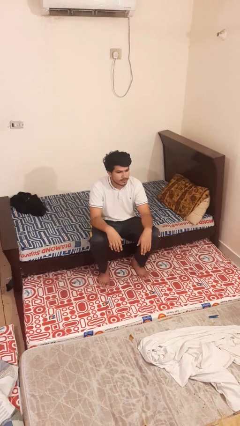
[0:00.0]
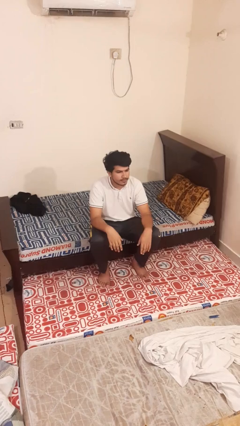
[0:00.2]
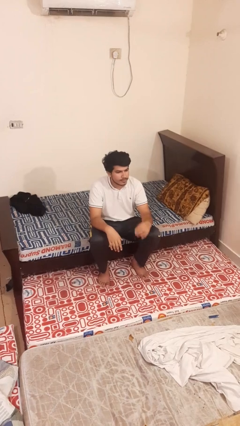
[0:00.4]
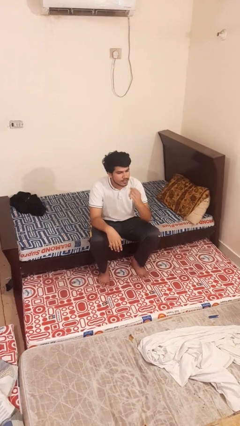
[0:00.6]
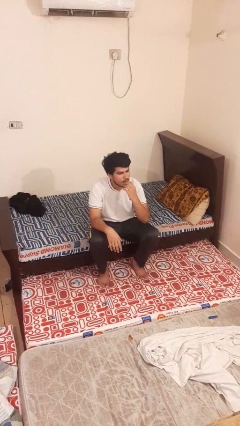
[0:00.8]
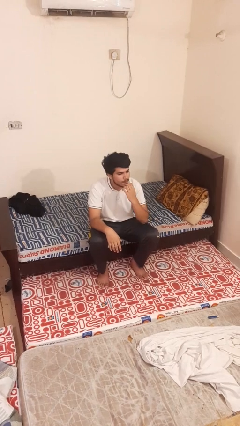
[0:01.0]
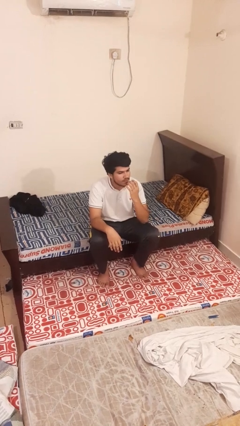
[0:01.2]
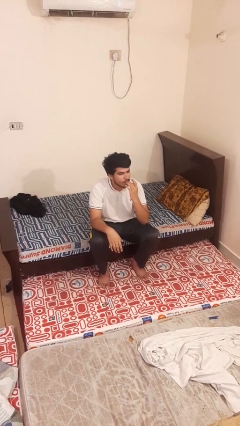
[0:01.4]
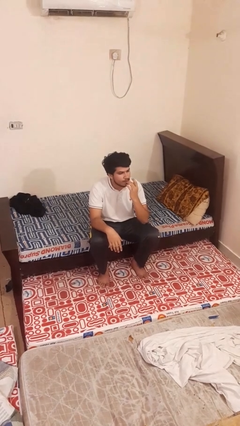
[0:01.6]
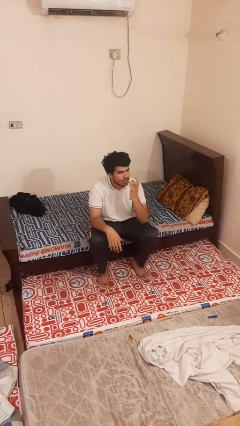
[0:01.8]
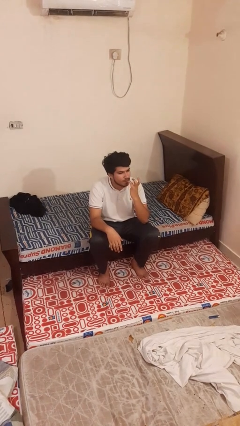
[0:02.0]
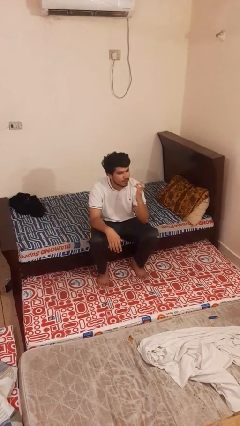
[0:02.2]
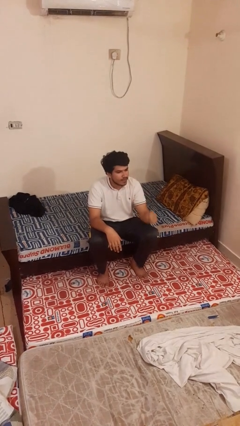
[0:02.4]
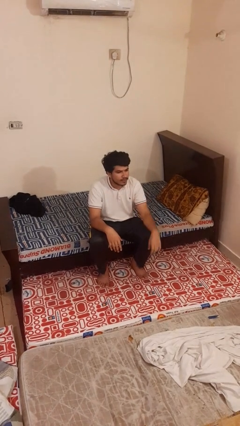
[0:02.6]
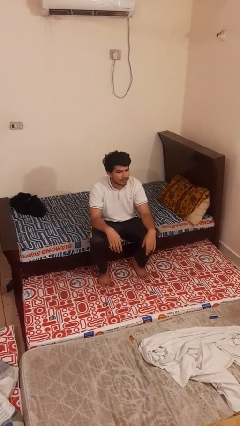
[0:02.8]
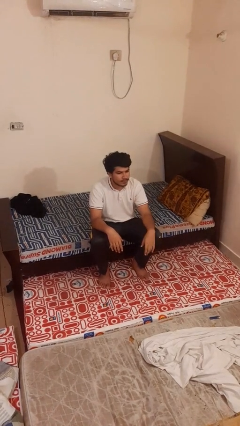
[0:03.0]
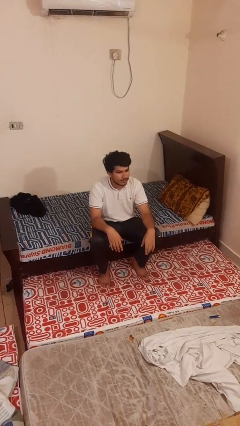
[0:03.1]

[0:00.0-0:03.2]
person licks fingers

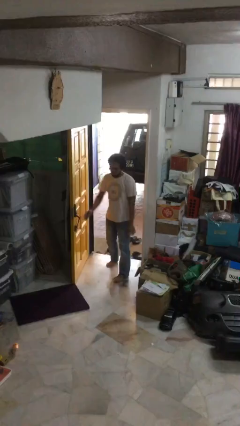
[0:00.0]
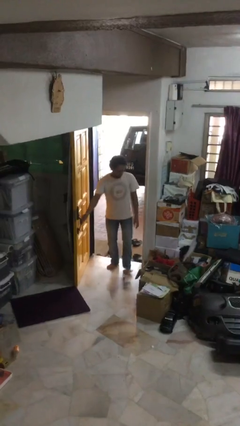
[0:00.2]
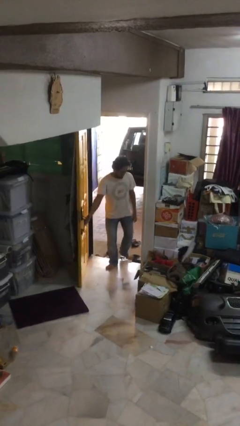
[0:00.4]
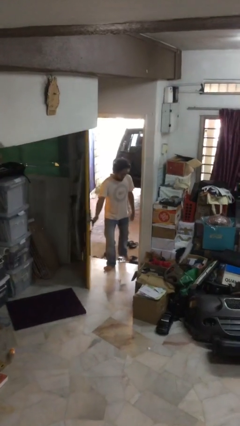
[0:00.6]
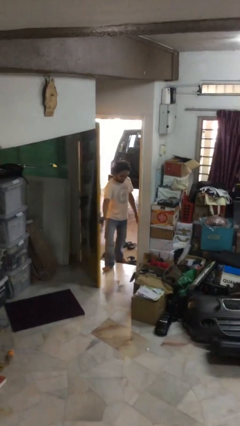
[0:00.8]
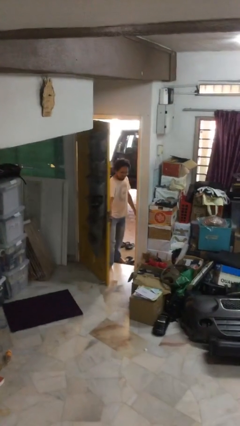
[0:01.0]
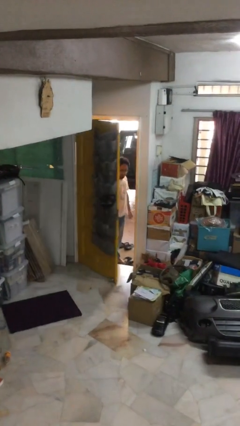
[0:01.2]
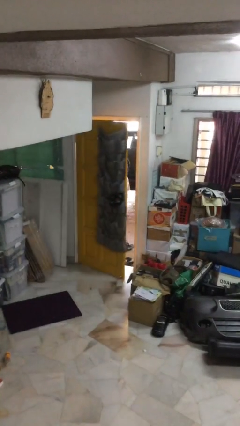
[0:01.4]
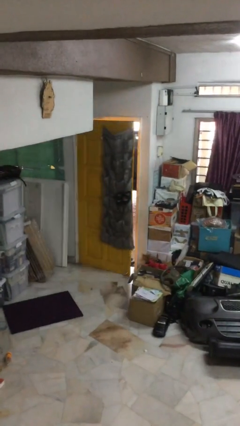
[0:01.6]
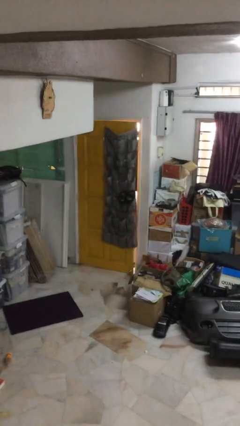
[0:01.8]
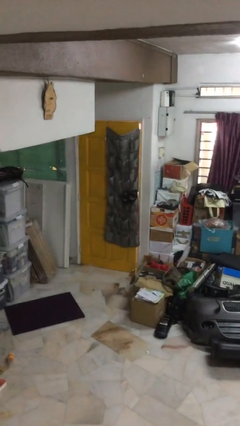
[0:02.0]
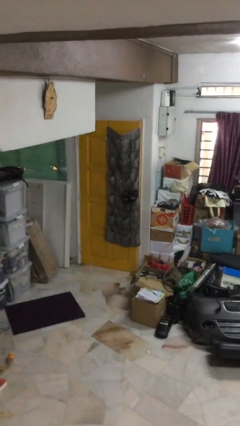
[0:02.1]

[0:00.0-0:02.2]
person closes facility door

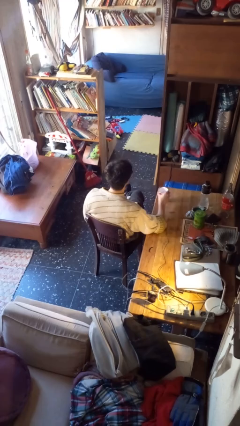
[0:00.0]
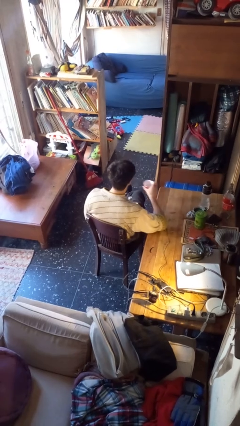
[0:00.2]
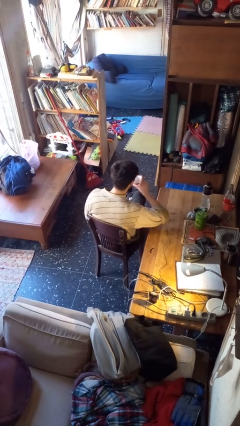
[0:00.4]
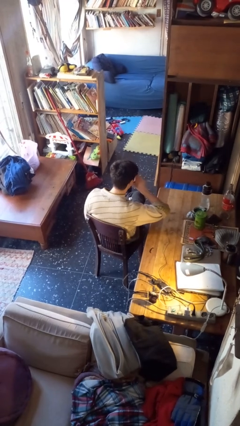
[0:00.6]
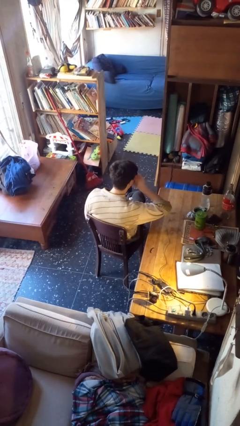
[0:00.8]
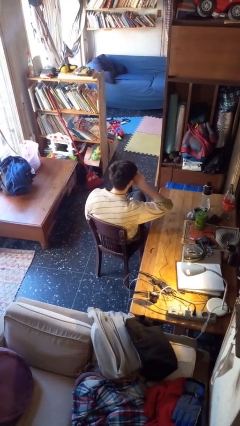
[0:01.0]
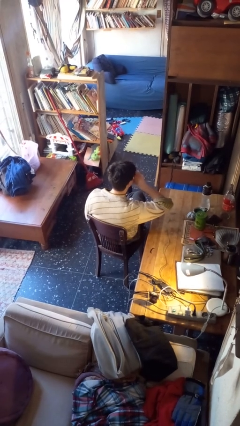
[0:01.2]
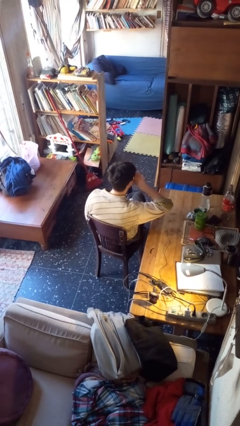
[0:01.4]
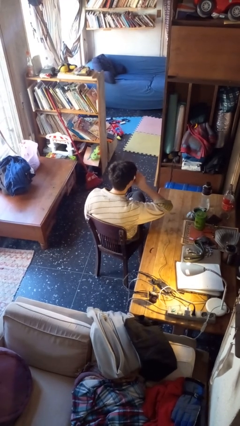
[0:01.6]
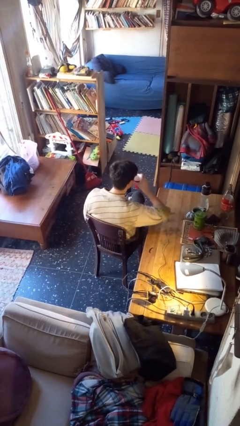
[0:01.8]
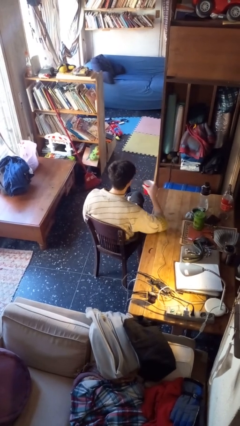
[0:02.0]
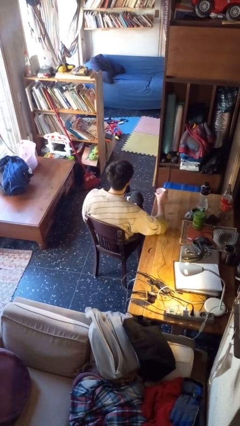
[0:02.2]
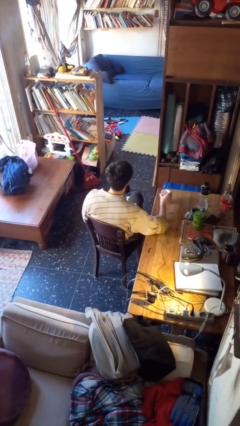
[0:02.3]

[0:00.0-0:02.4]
person drinks from cup

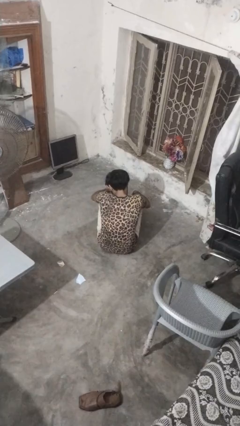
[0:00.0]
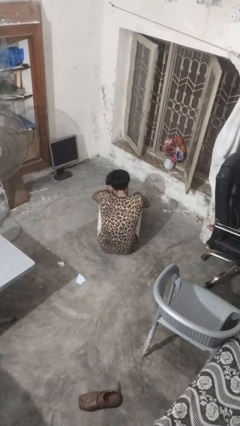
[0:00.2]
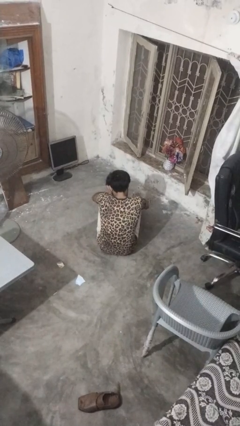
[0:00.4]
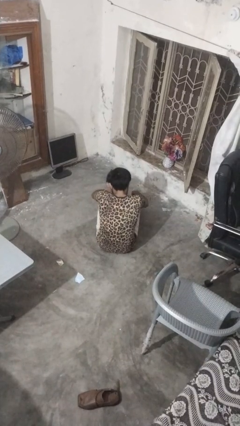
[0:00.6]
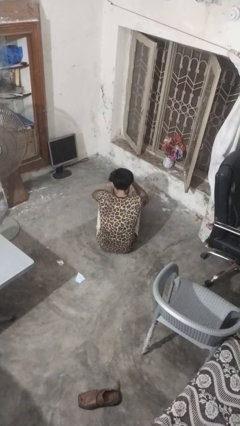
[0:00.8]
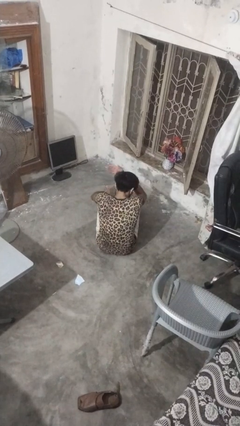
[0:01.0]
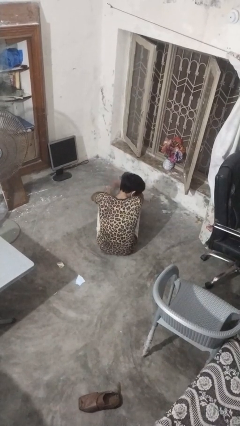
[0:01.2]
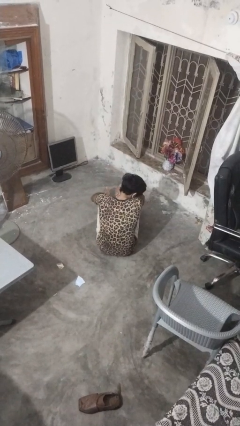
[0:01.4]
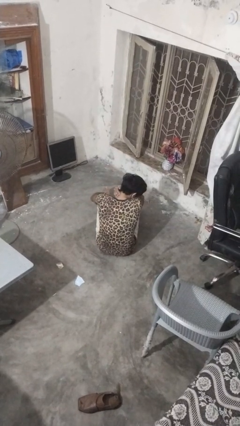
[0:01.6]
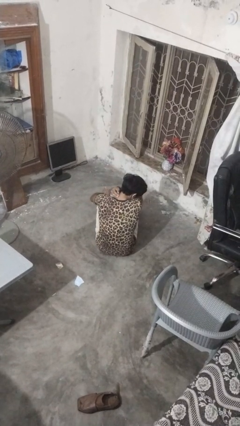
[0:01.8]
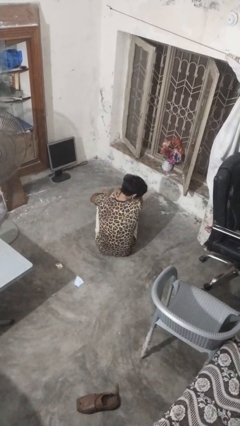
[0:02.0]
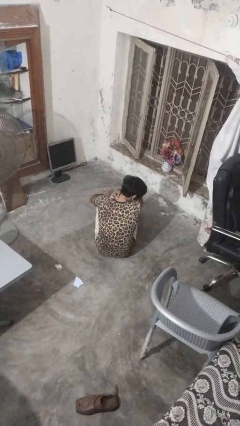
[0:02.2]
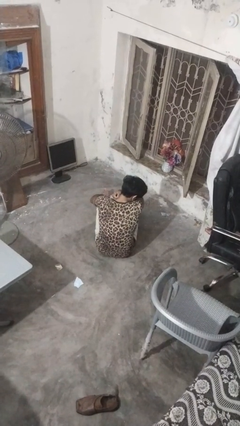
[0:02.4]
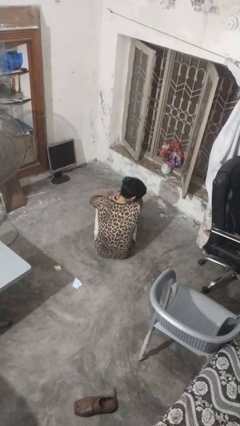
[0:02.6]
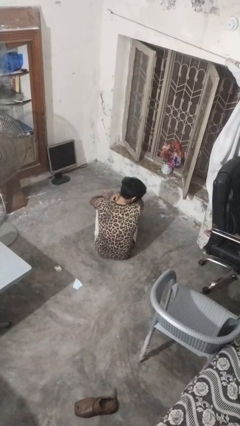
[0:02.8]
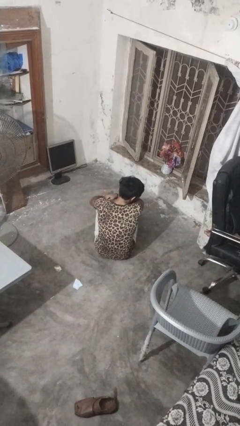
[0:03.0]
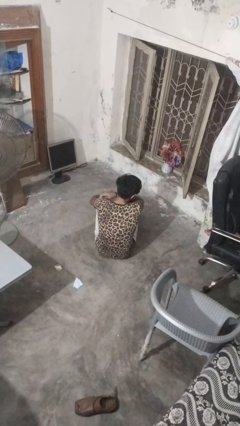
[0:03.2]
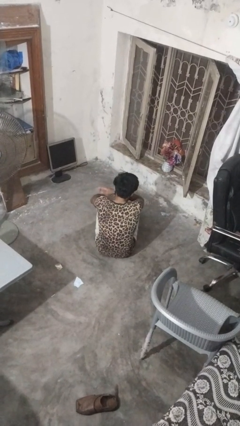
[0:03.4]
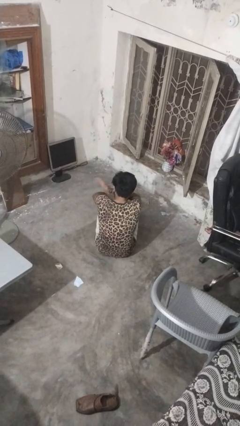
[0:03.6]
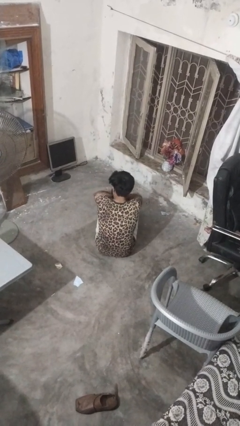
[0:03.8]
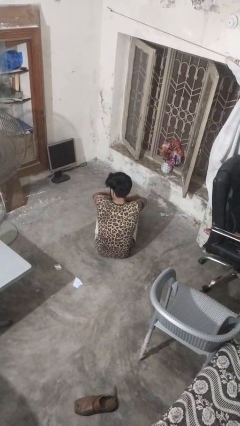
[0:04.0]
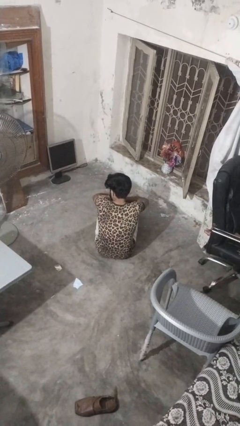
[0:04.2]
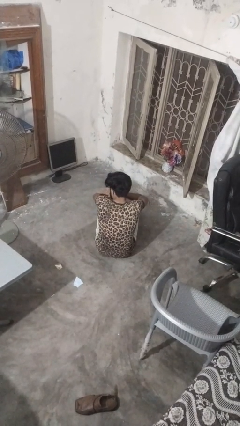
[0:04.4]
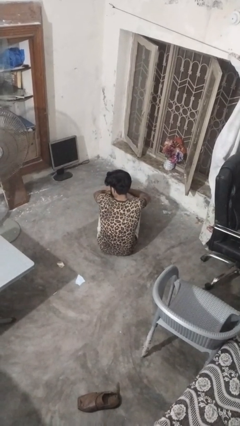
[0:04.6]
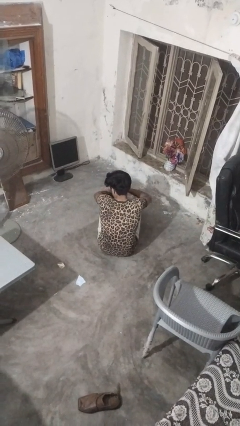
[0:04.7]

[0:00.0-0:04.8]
person swats bug

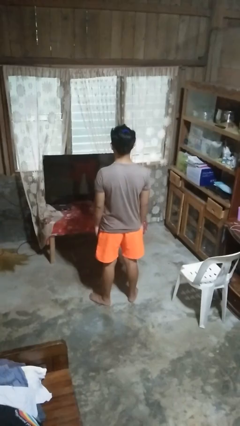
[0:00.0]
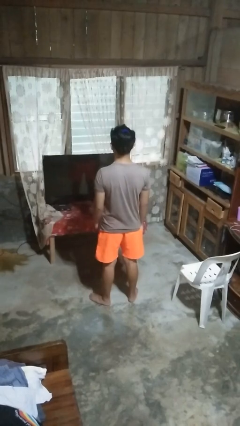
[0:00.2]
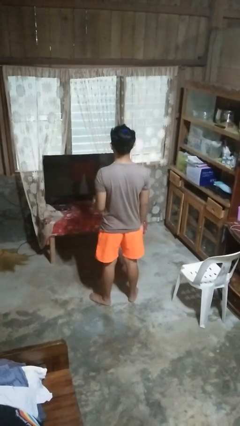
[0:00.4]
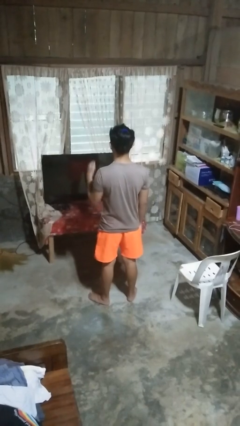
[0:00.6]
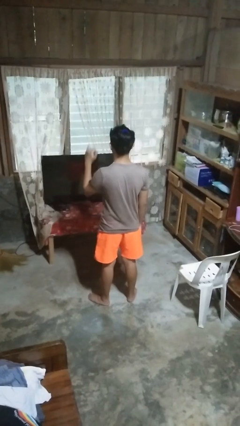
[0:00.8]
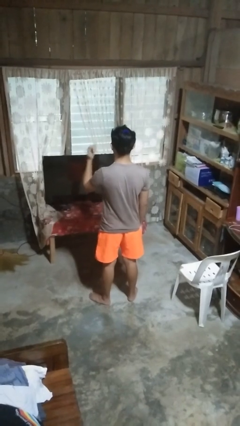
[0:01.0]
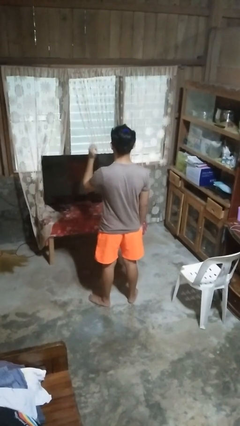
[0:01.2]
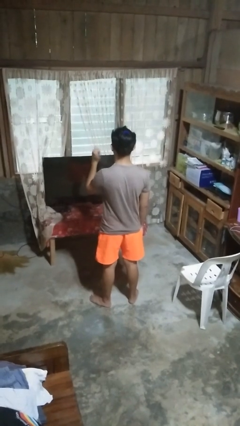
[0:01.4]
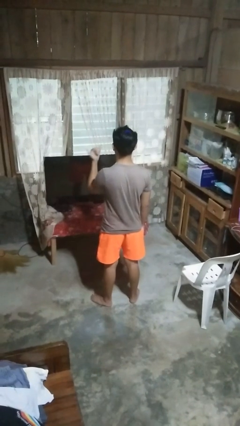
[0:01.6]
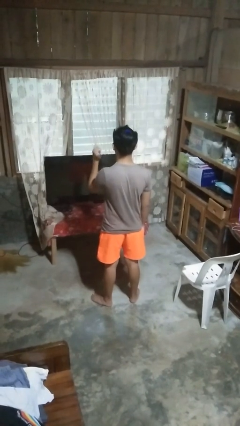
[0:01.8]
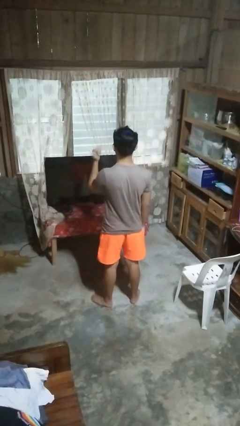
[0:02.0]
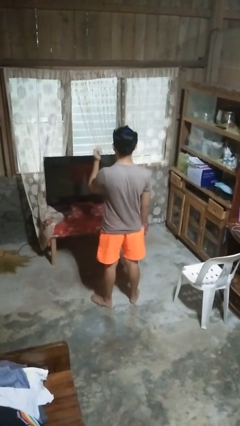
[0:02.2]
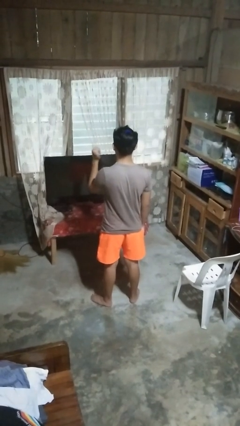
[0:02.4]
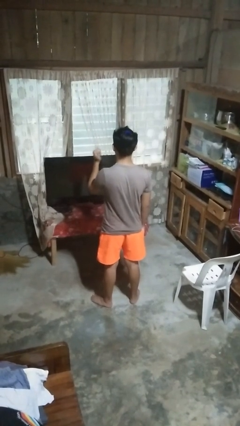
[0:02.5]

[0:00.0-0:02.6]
person gestures hang loose

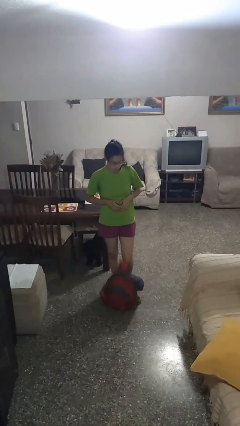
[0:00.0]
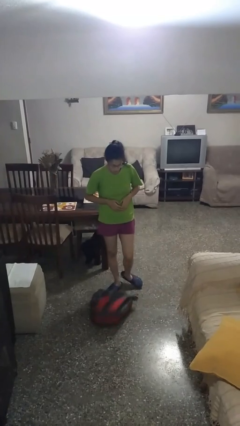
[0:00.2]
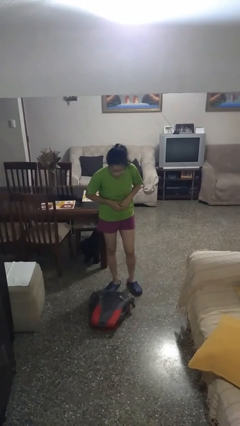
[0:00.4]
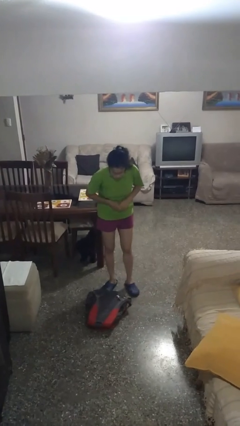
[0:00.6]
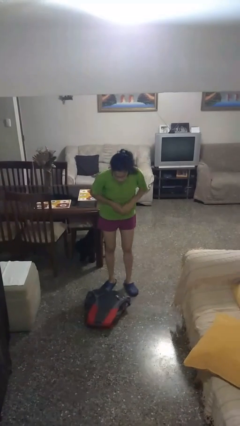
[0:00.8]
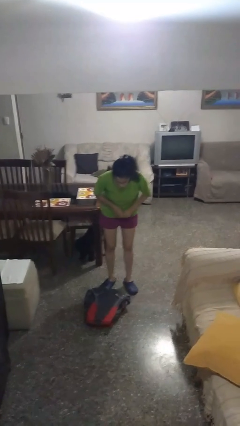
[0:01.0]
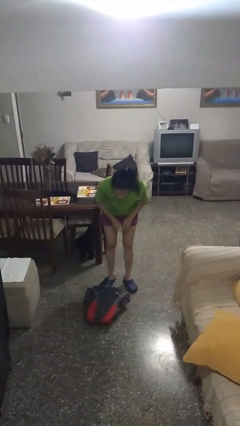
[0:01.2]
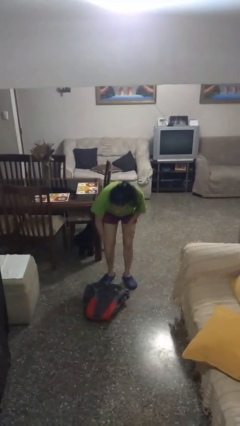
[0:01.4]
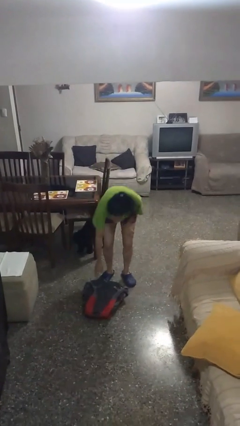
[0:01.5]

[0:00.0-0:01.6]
person drops object

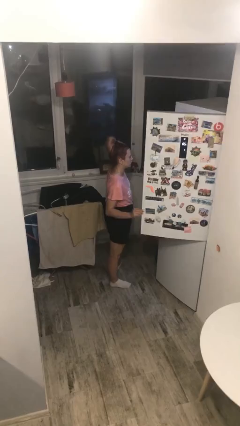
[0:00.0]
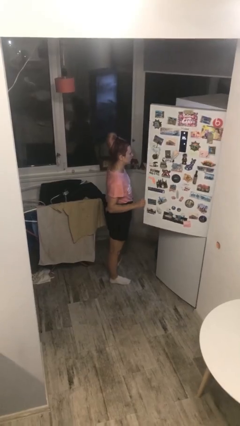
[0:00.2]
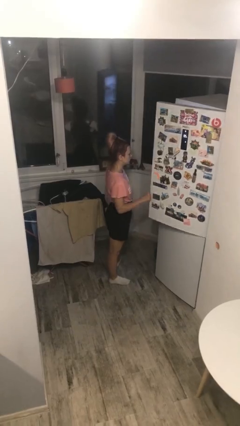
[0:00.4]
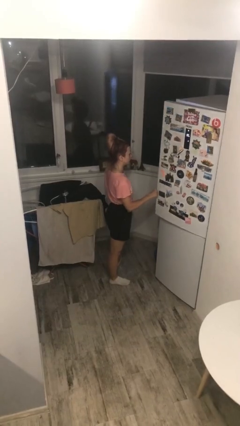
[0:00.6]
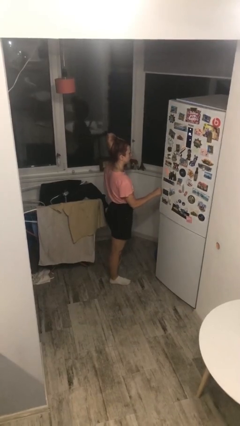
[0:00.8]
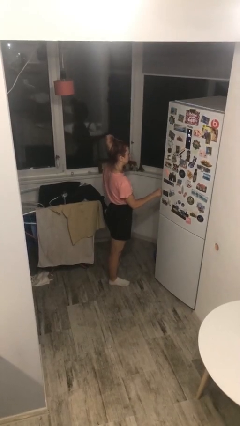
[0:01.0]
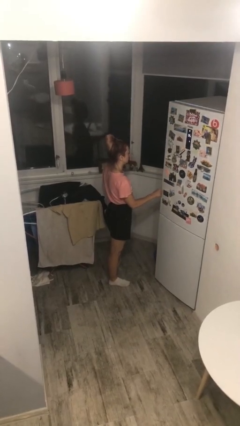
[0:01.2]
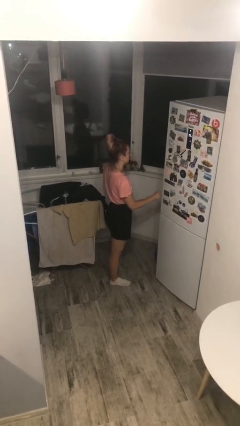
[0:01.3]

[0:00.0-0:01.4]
person closes refrigerator
